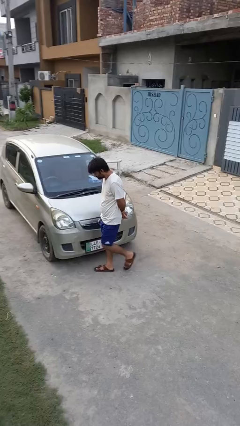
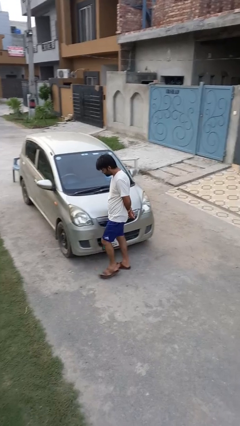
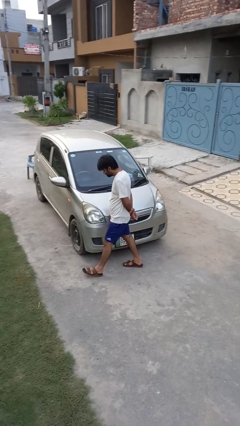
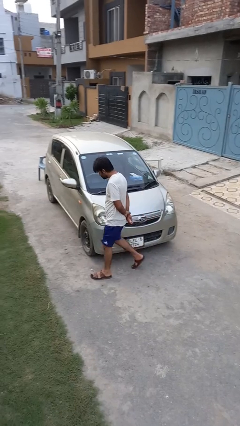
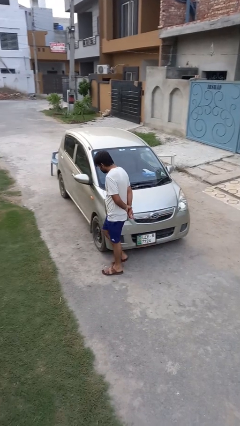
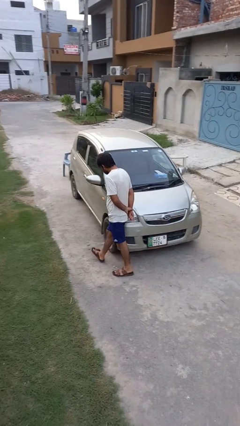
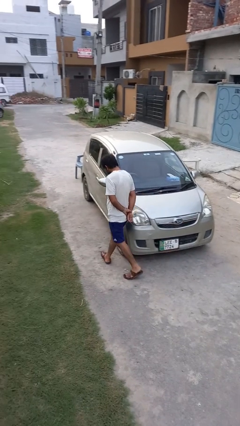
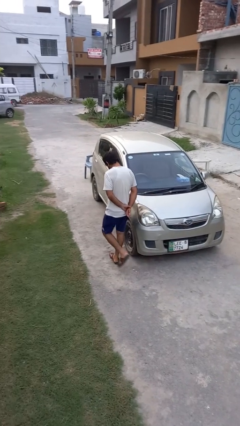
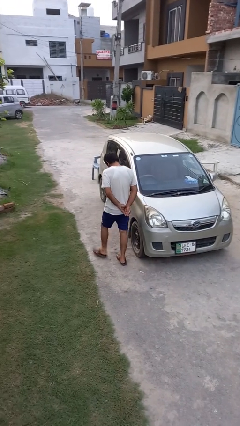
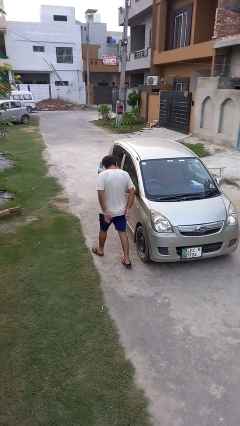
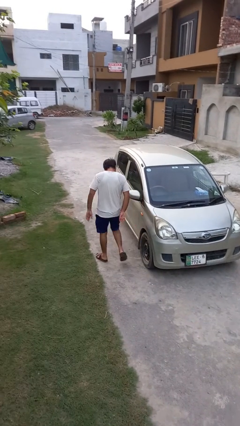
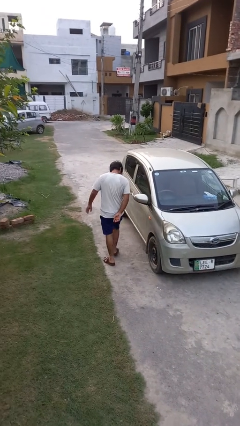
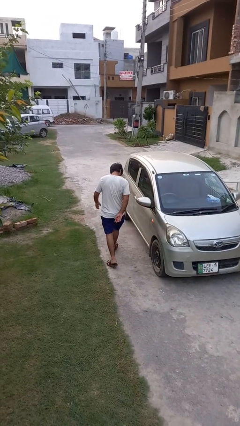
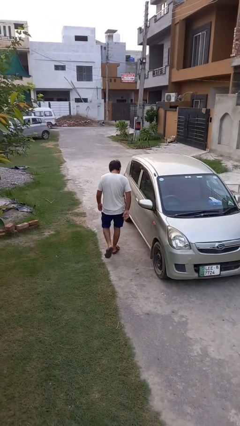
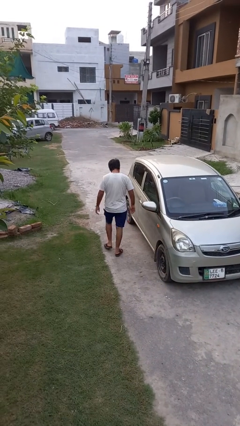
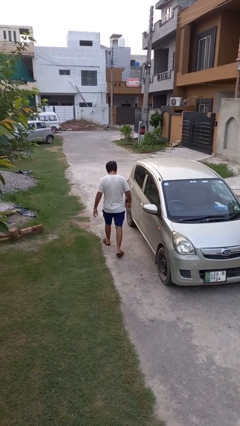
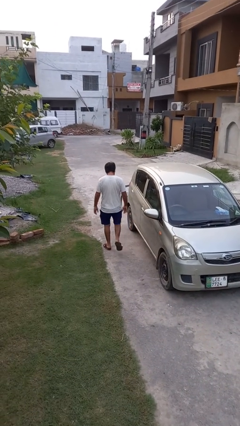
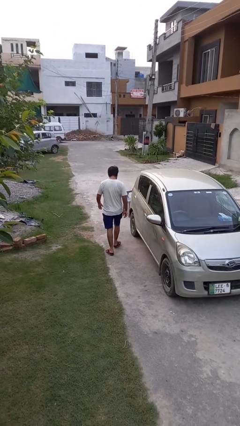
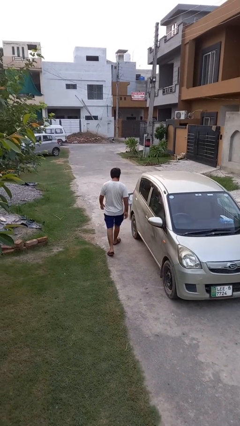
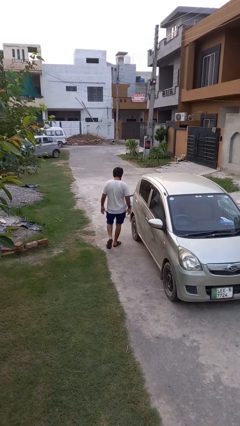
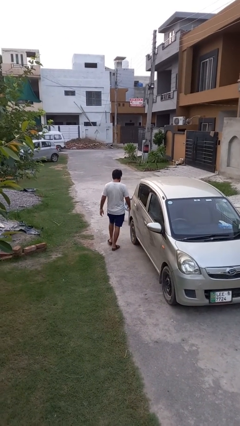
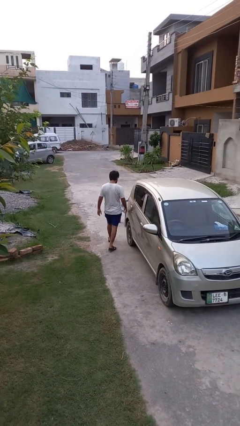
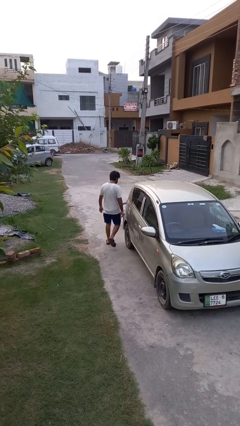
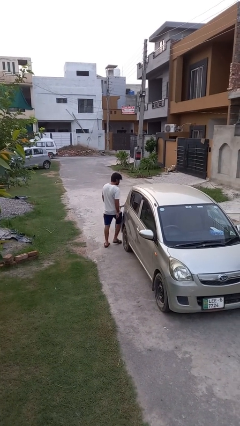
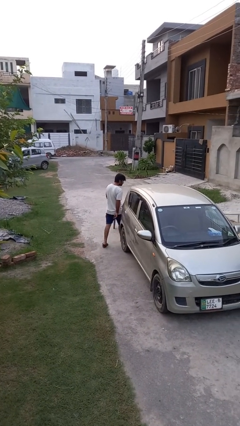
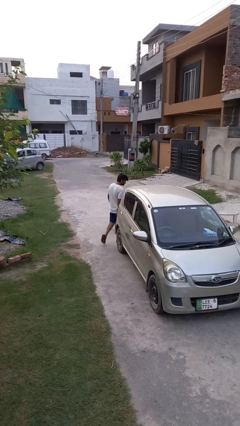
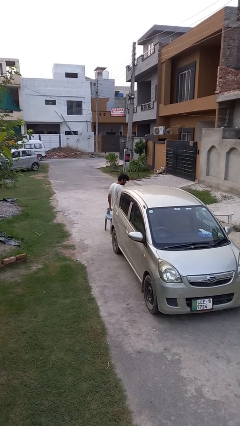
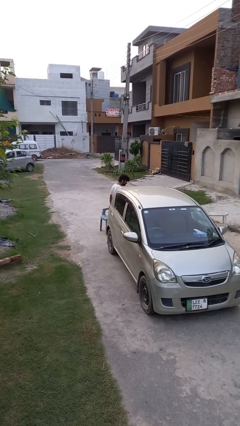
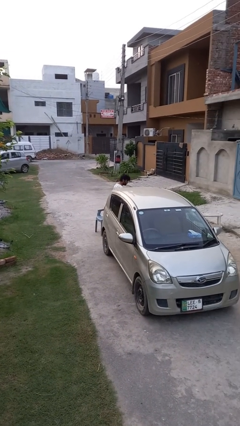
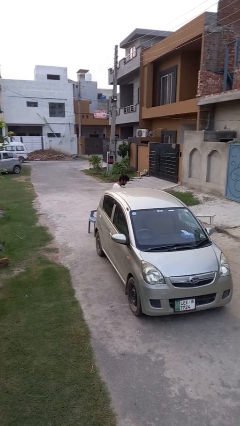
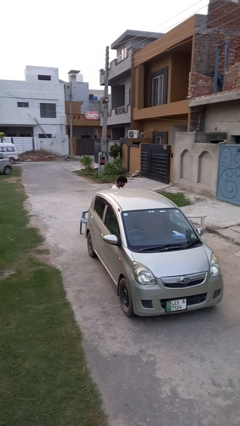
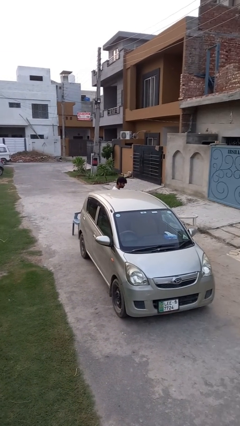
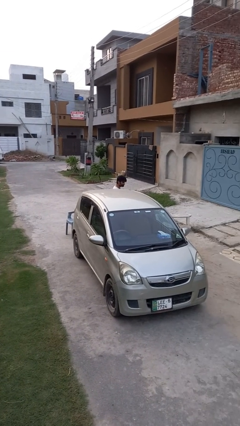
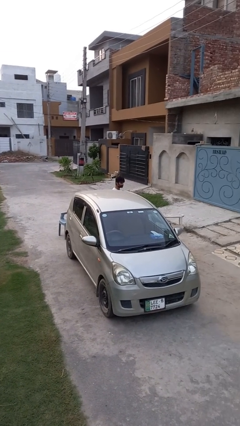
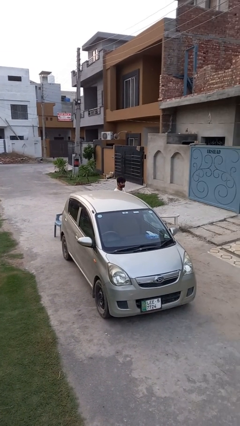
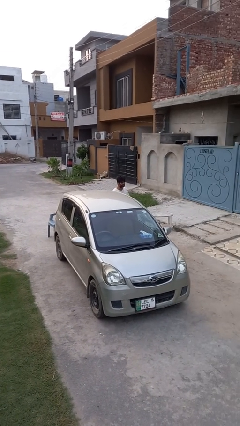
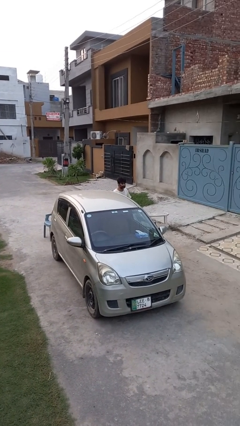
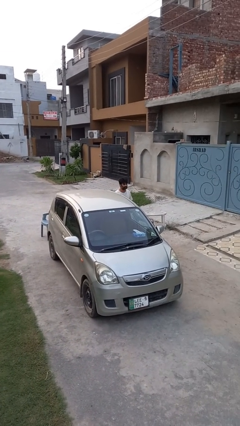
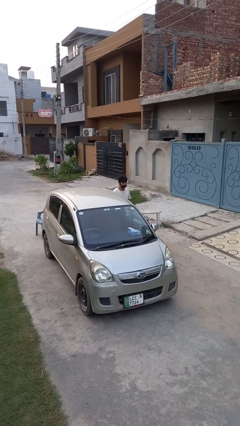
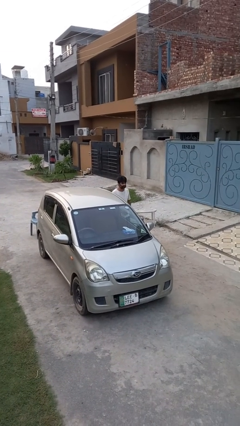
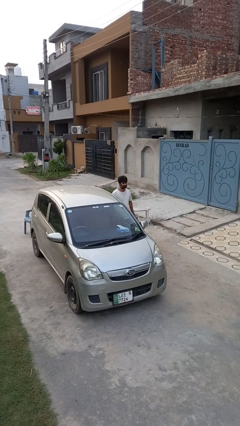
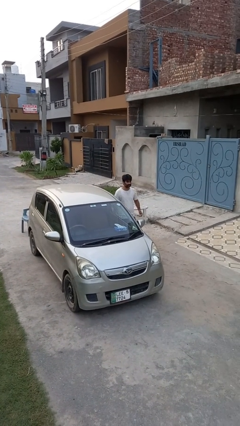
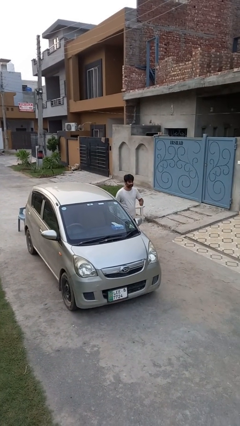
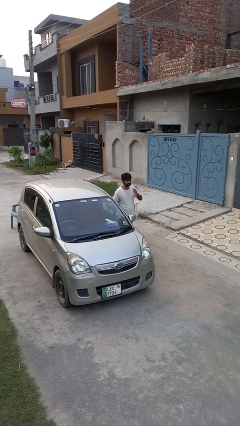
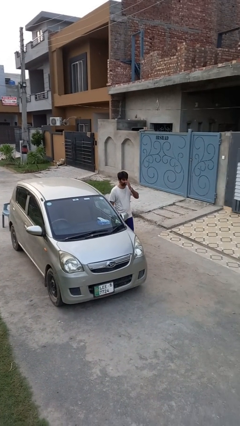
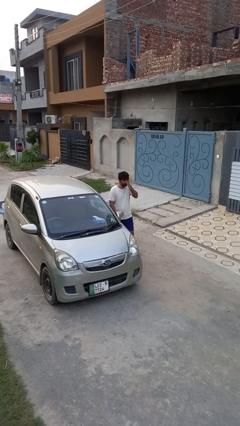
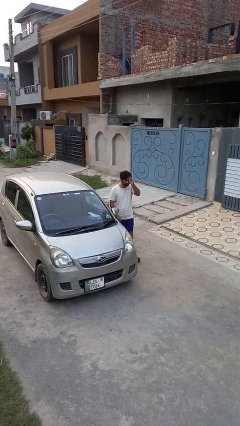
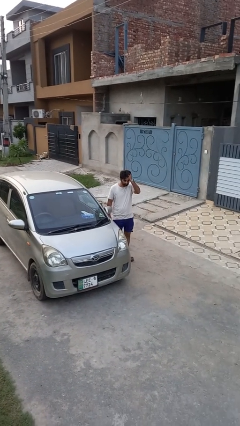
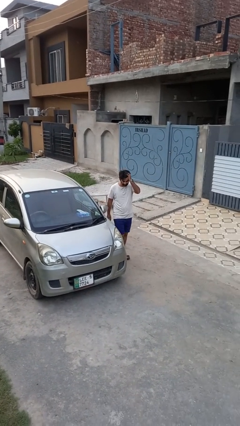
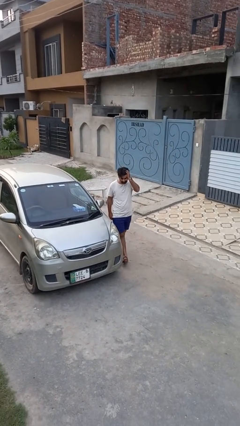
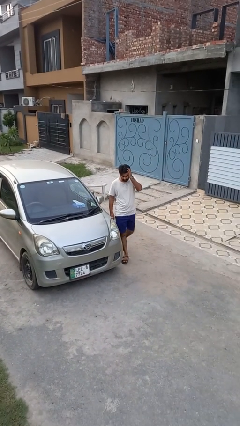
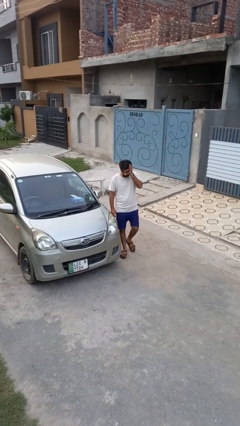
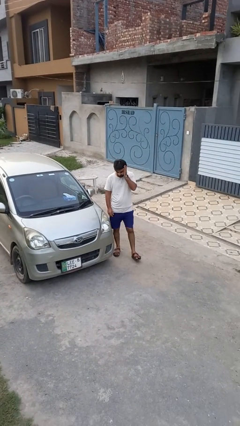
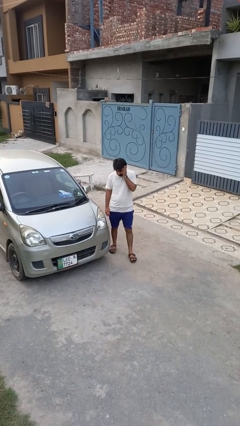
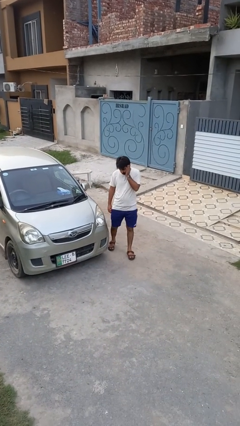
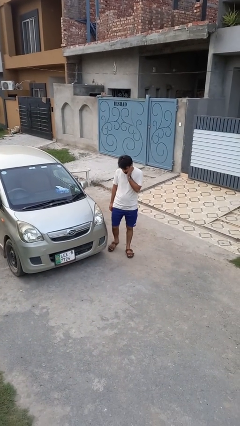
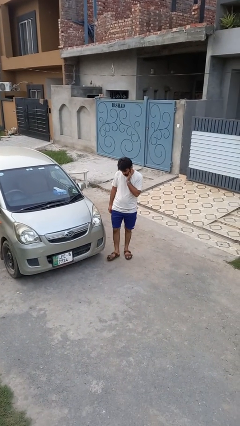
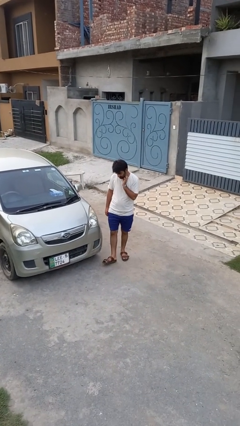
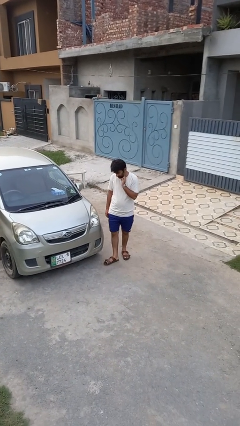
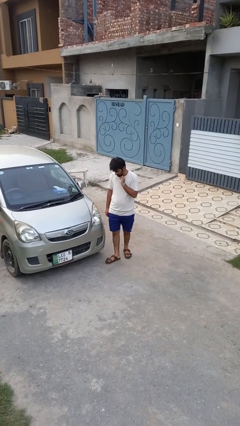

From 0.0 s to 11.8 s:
person walks around car

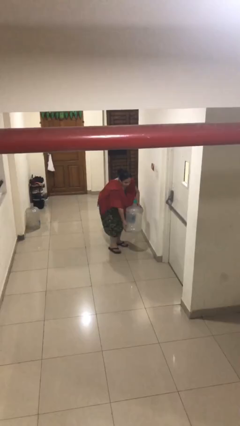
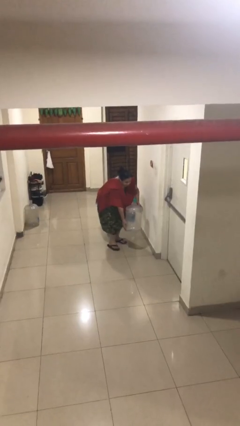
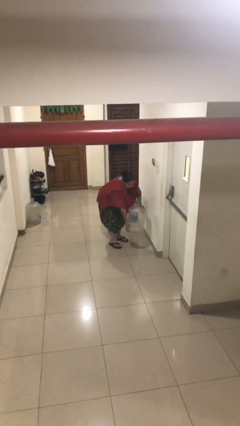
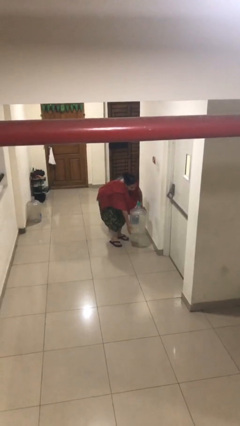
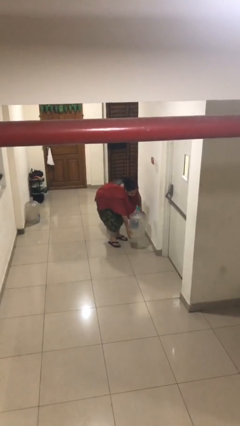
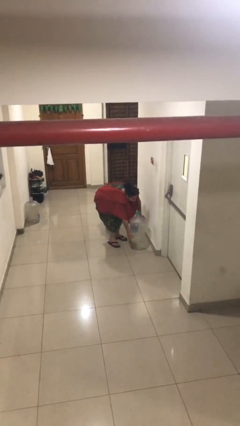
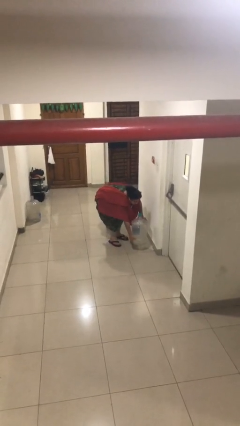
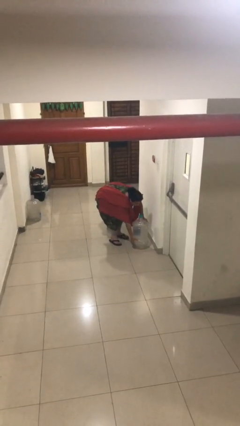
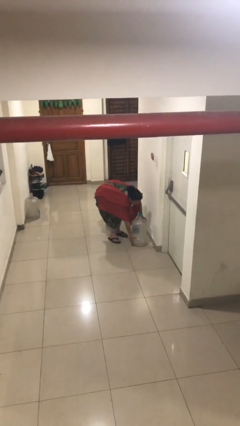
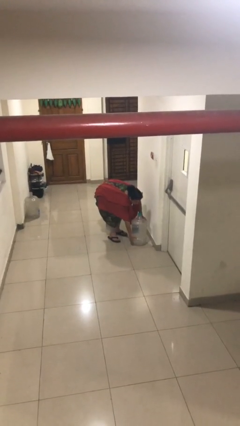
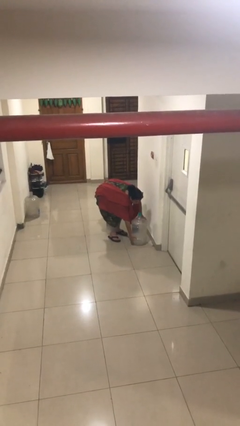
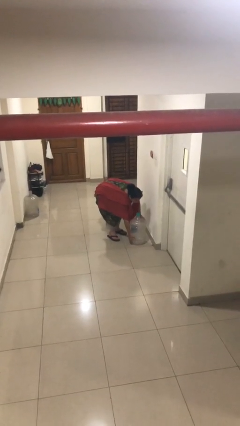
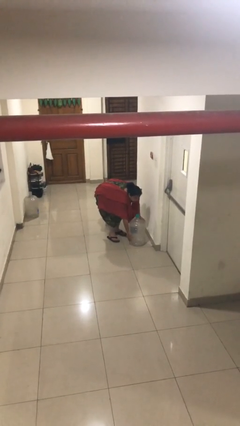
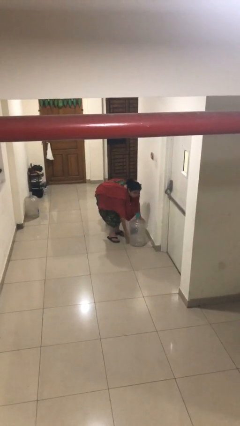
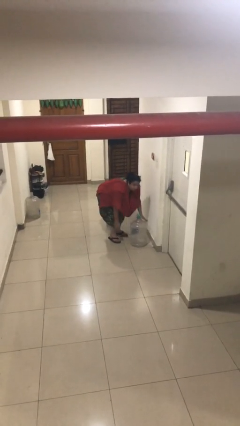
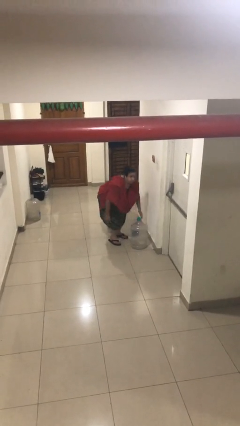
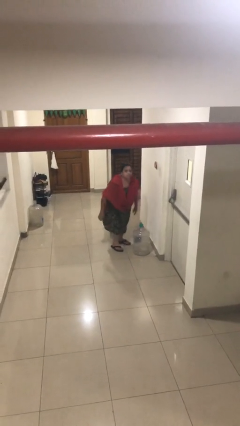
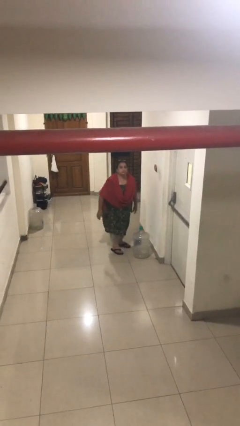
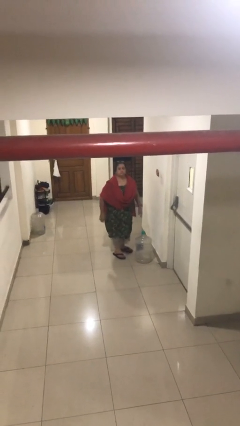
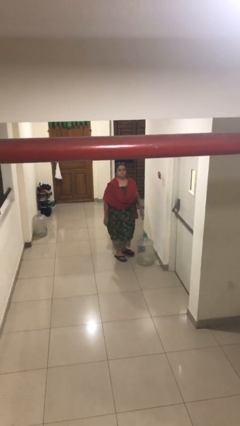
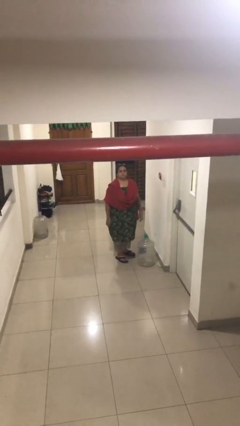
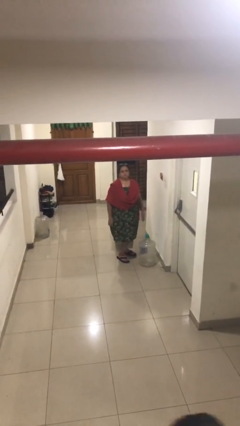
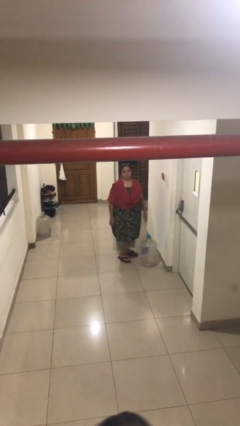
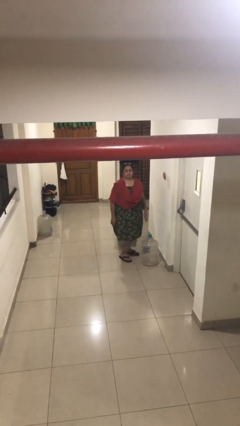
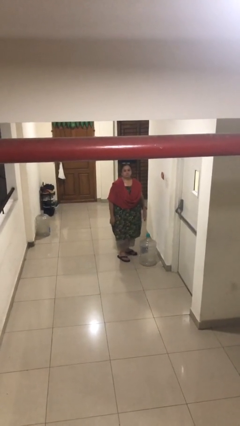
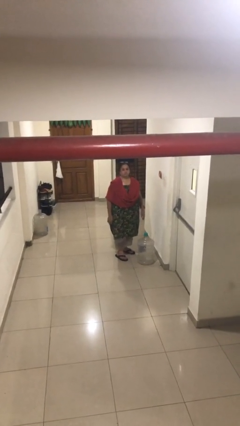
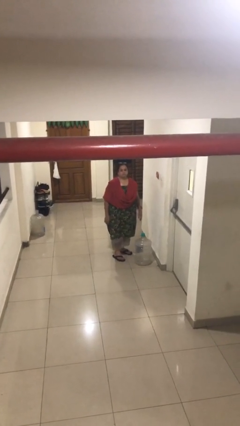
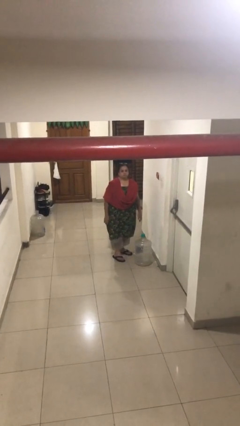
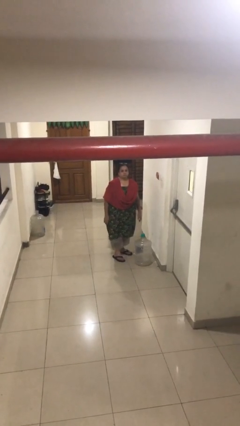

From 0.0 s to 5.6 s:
person puts down object on floor

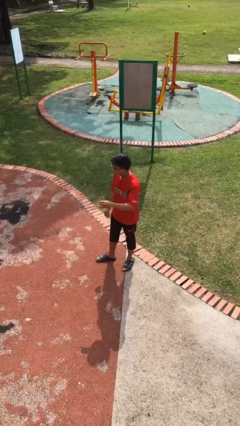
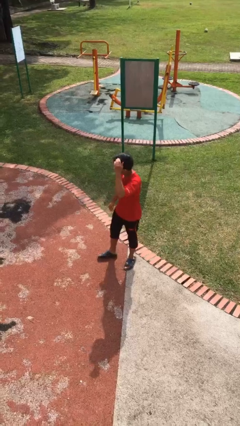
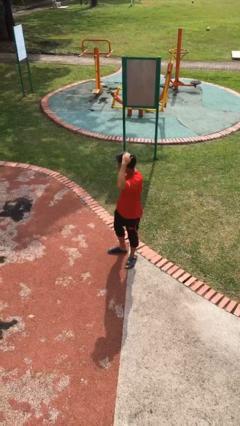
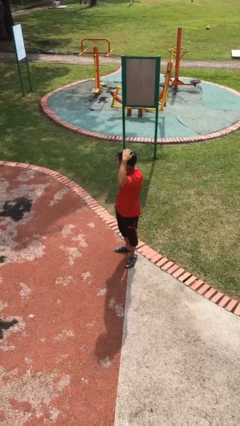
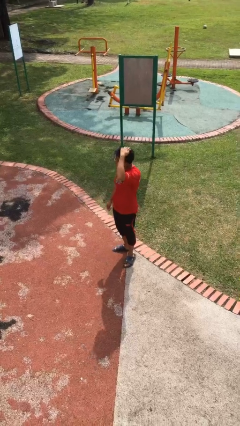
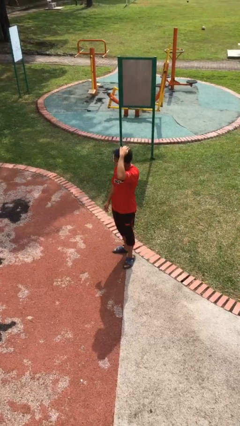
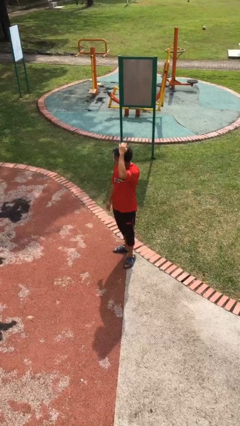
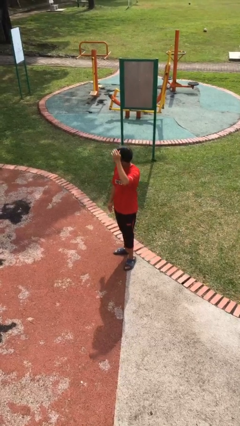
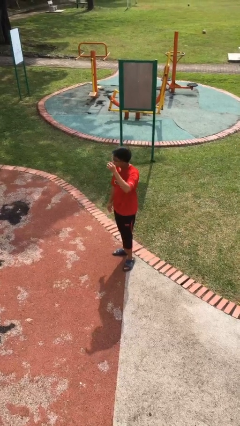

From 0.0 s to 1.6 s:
person pats head
